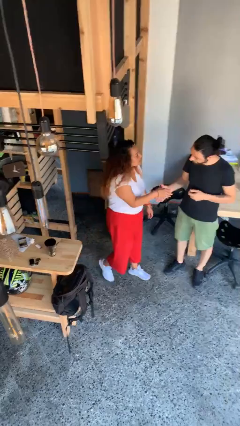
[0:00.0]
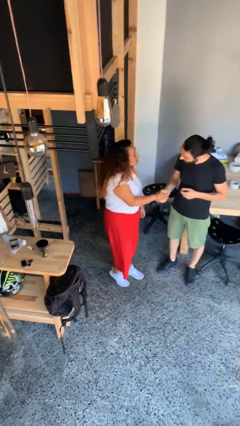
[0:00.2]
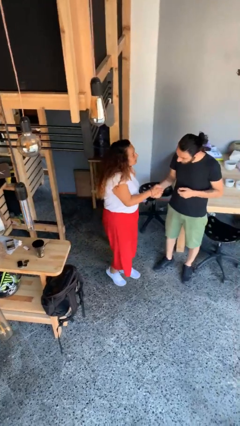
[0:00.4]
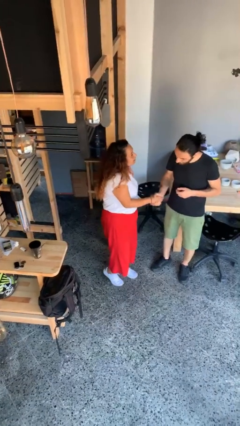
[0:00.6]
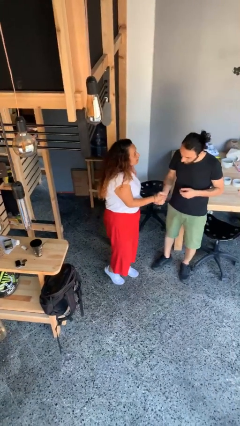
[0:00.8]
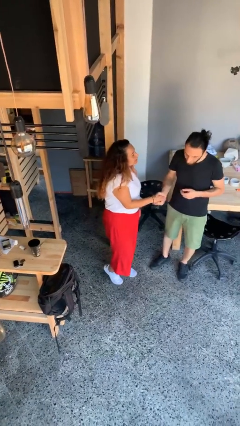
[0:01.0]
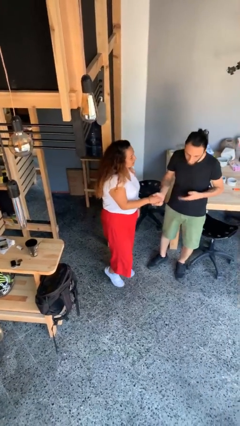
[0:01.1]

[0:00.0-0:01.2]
person shakes hand

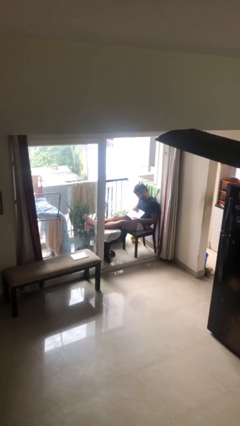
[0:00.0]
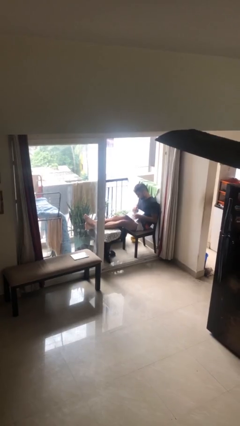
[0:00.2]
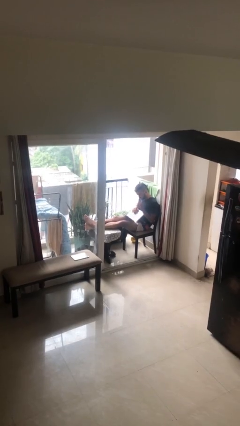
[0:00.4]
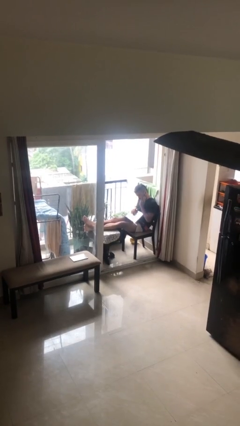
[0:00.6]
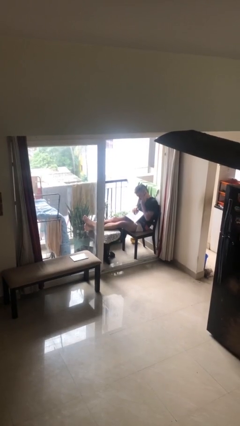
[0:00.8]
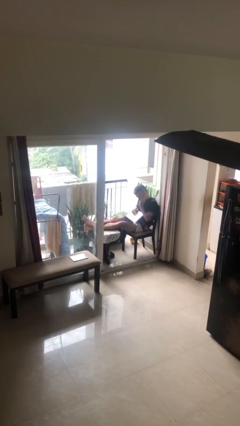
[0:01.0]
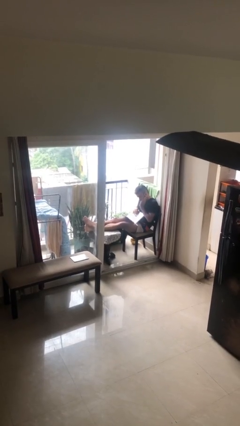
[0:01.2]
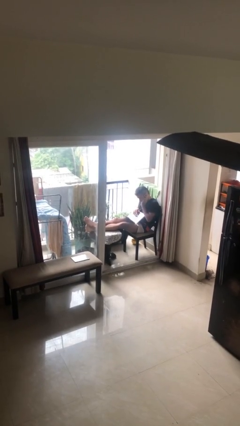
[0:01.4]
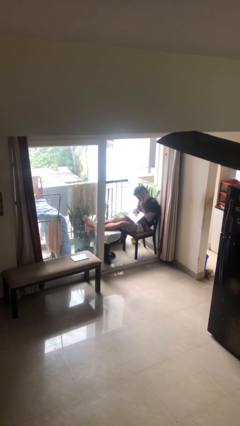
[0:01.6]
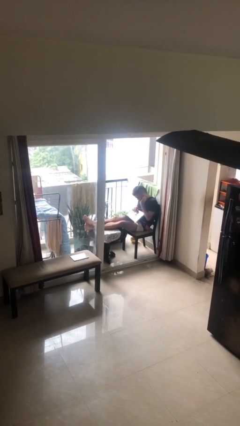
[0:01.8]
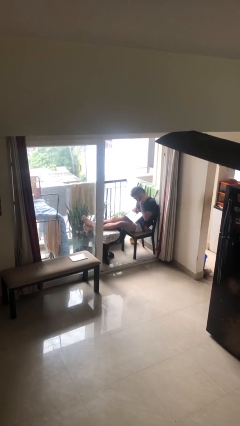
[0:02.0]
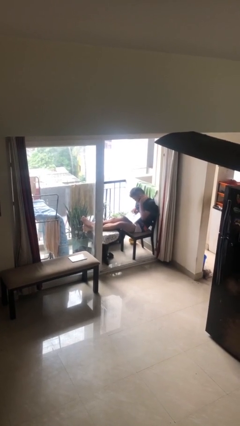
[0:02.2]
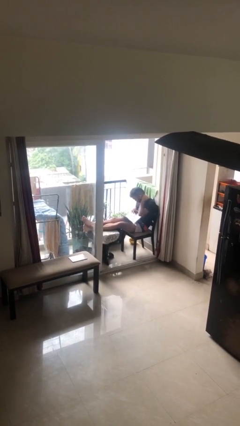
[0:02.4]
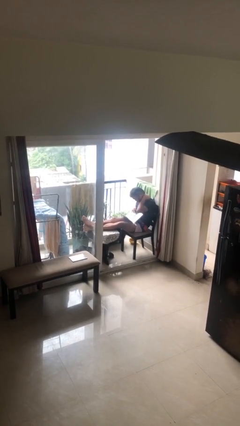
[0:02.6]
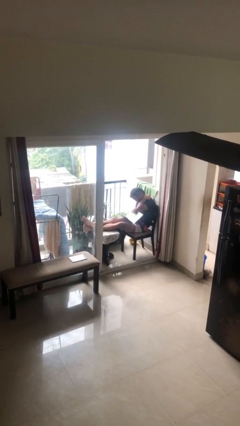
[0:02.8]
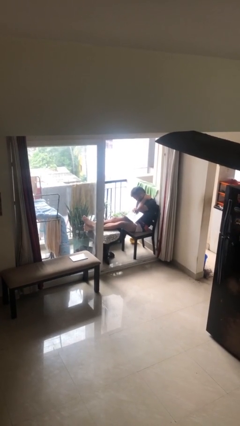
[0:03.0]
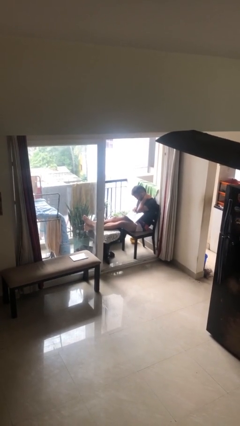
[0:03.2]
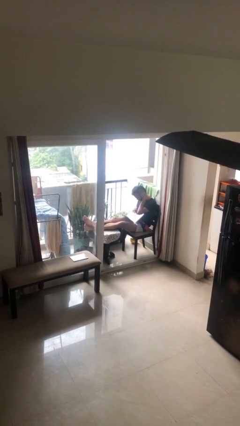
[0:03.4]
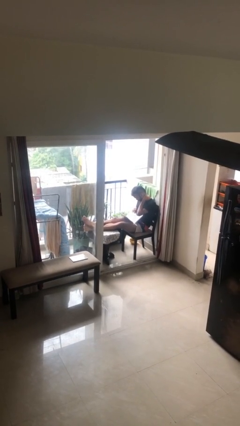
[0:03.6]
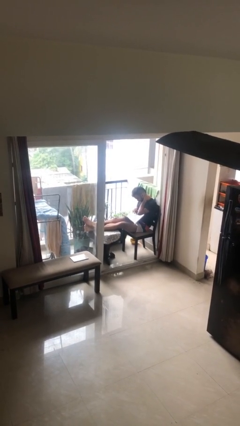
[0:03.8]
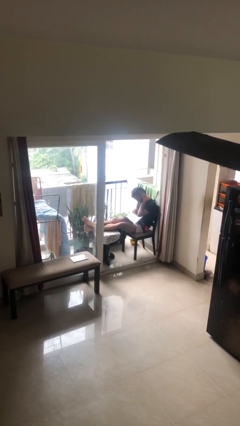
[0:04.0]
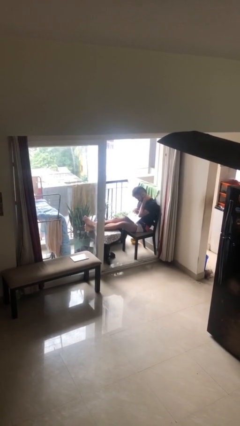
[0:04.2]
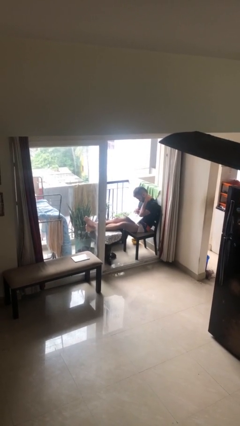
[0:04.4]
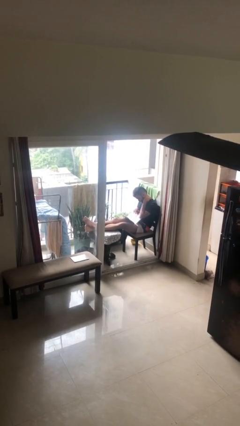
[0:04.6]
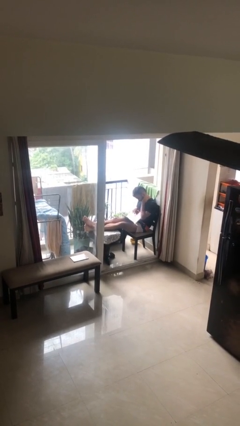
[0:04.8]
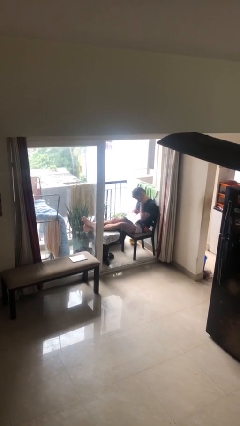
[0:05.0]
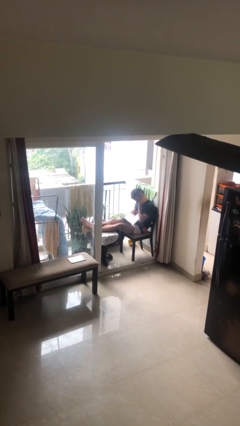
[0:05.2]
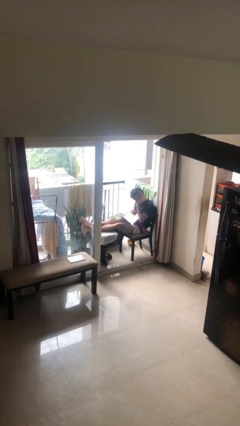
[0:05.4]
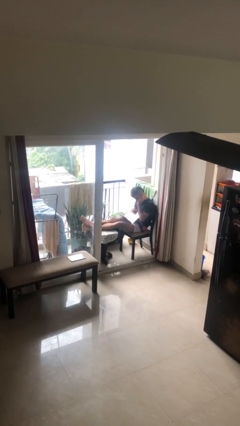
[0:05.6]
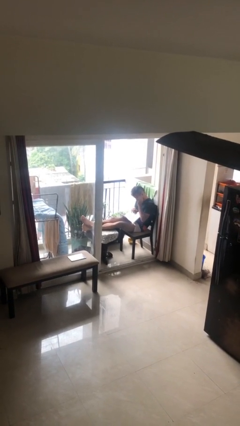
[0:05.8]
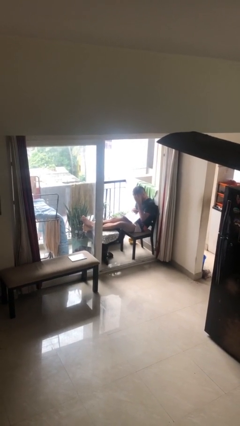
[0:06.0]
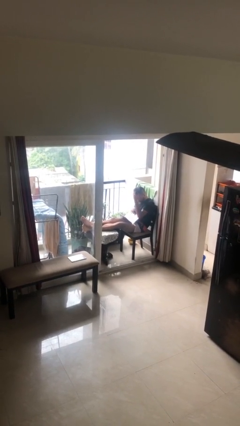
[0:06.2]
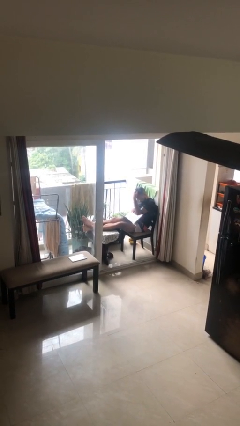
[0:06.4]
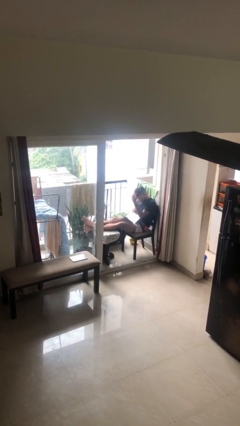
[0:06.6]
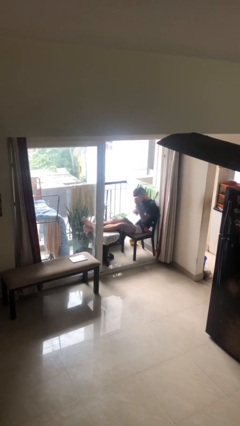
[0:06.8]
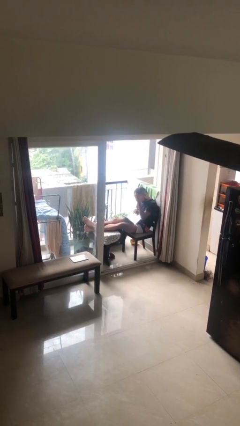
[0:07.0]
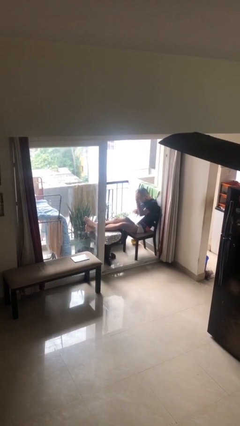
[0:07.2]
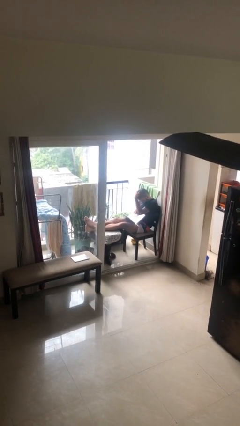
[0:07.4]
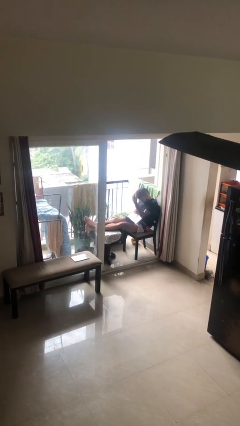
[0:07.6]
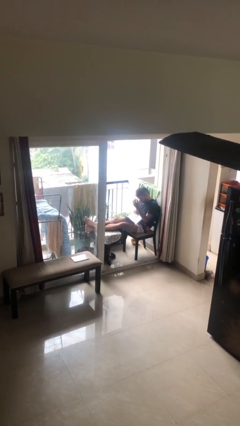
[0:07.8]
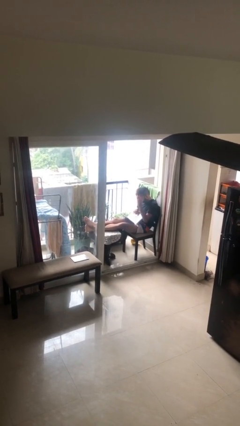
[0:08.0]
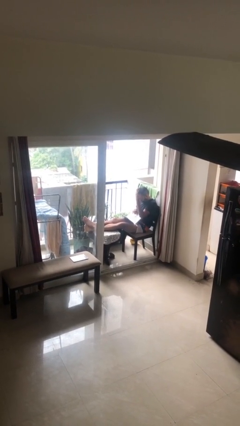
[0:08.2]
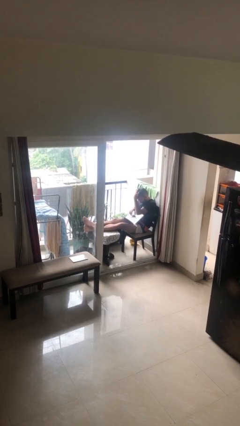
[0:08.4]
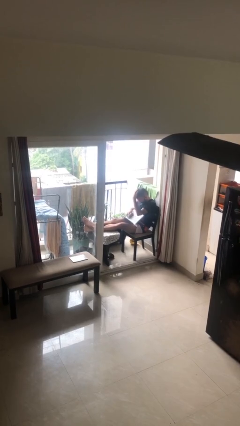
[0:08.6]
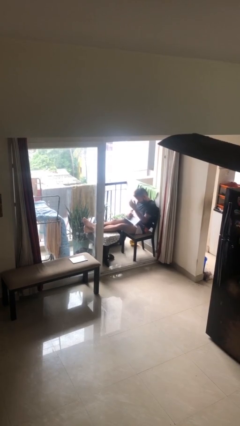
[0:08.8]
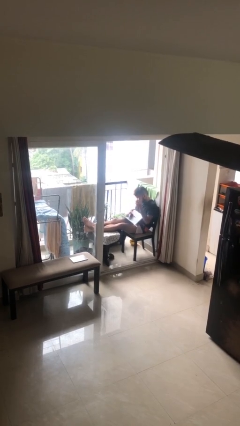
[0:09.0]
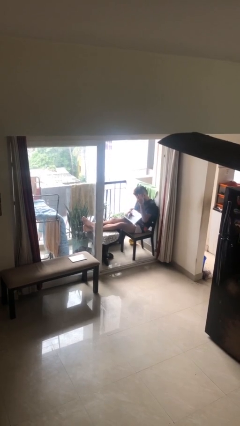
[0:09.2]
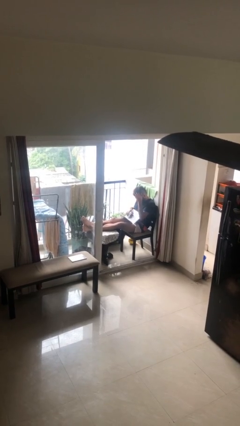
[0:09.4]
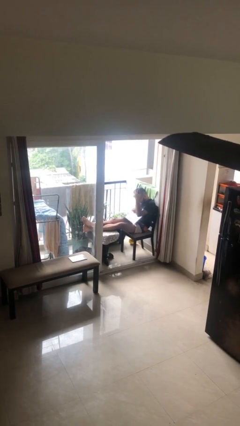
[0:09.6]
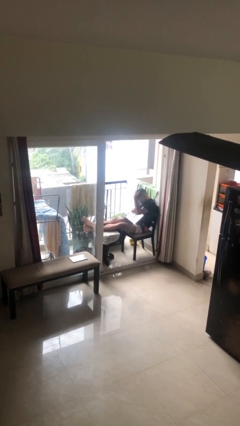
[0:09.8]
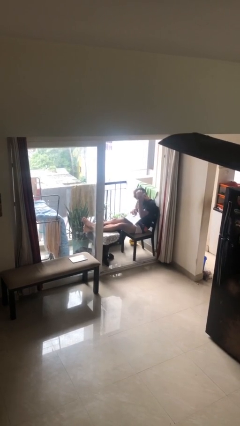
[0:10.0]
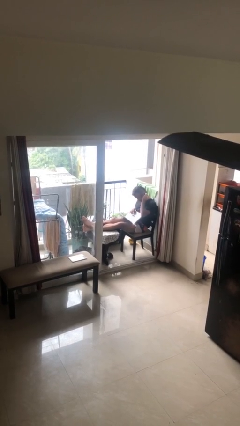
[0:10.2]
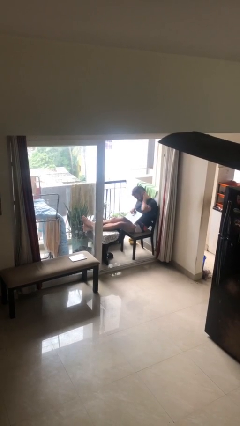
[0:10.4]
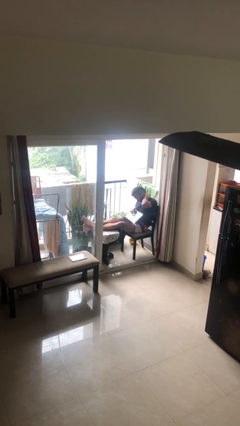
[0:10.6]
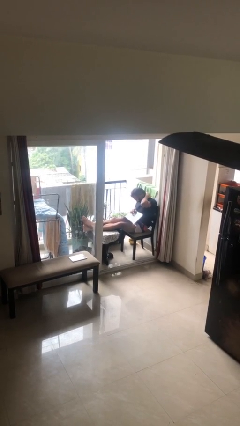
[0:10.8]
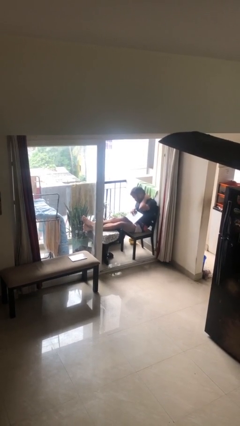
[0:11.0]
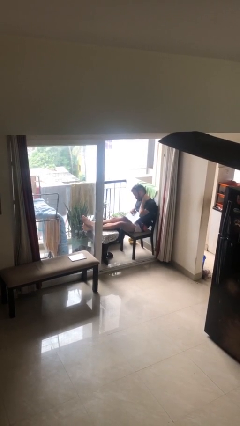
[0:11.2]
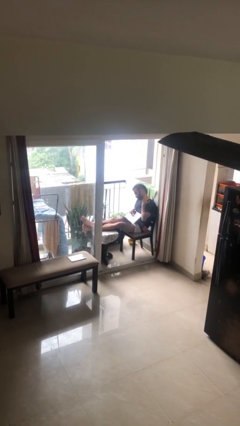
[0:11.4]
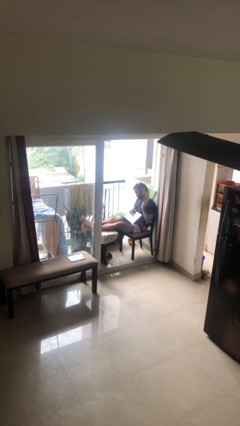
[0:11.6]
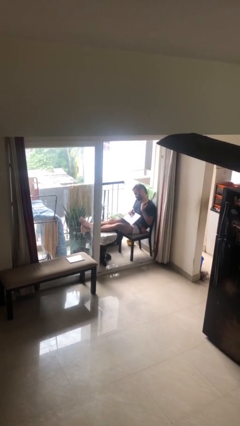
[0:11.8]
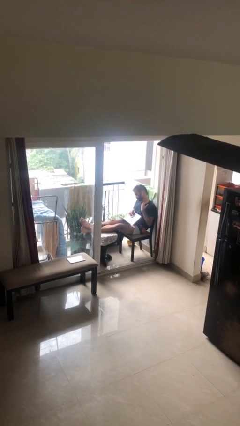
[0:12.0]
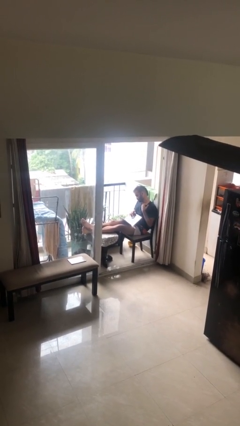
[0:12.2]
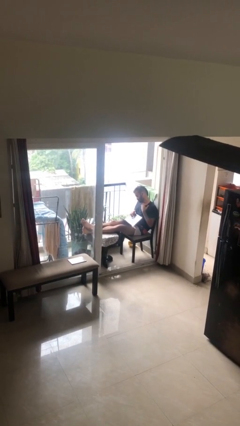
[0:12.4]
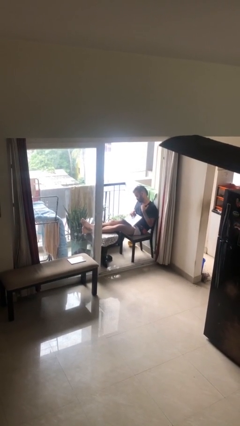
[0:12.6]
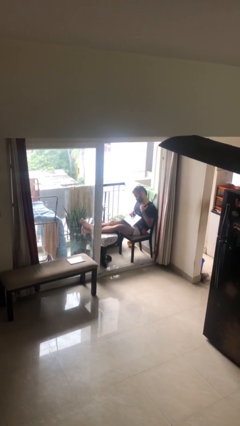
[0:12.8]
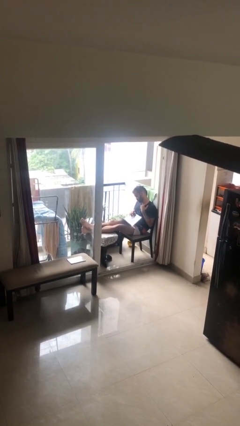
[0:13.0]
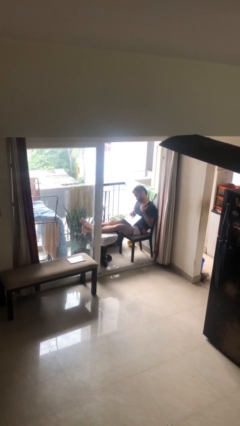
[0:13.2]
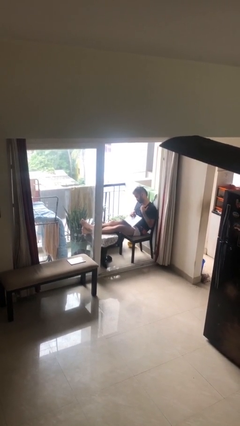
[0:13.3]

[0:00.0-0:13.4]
person interacts with laptop

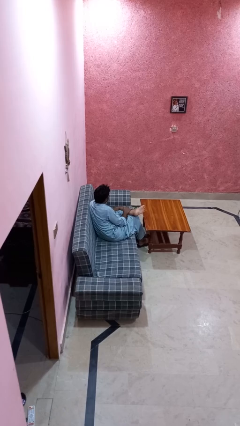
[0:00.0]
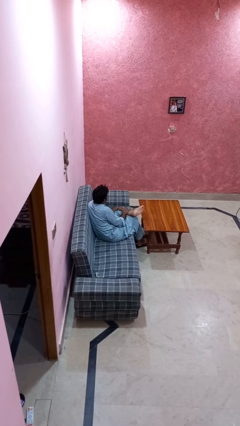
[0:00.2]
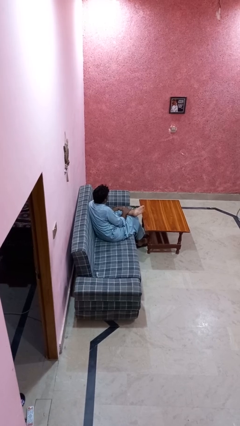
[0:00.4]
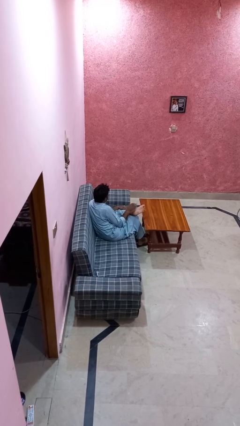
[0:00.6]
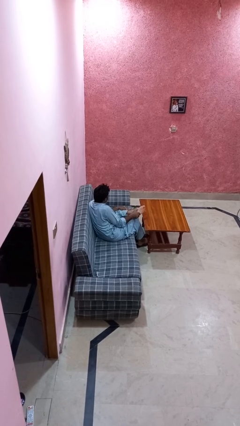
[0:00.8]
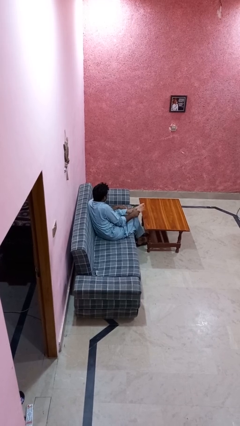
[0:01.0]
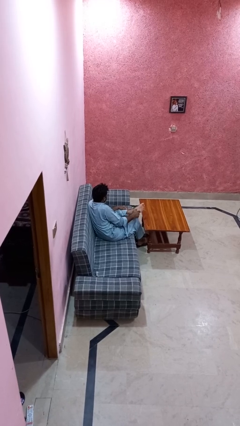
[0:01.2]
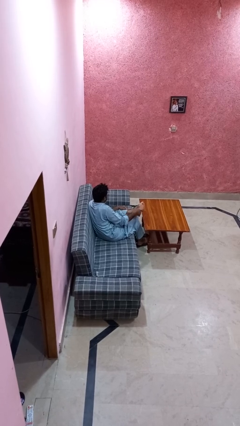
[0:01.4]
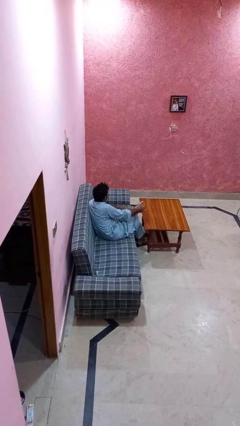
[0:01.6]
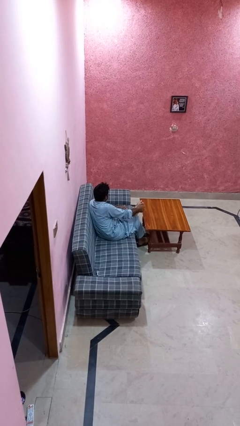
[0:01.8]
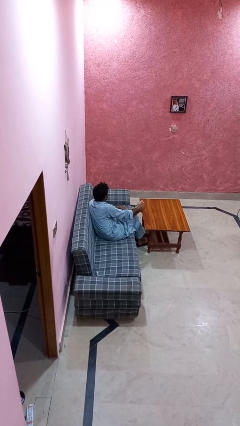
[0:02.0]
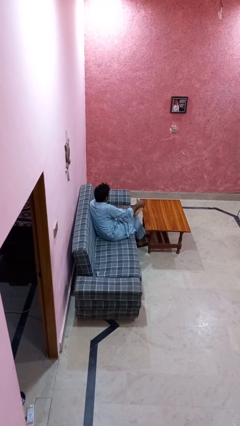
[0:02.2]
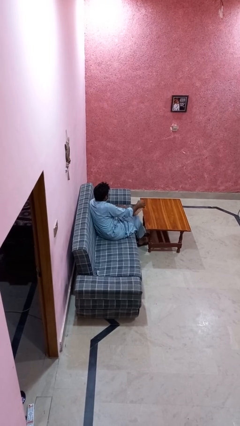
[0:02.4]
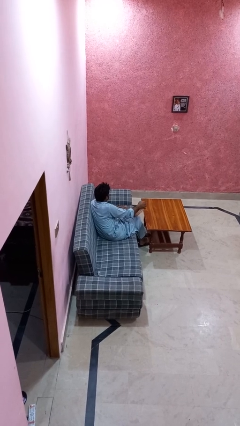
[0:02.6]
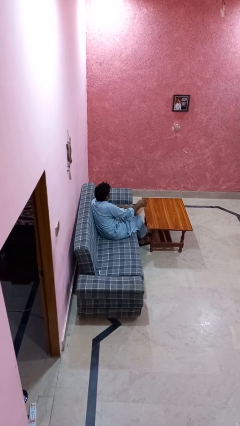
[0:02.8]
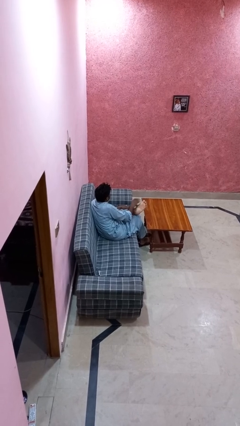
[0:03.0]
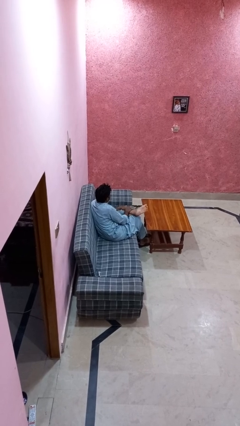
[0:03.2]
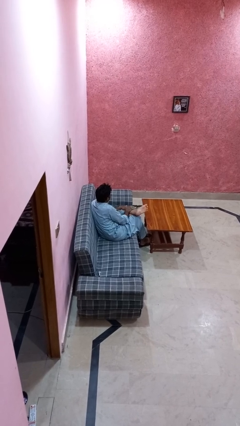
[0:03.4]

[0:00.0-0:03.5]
person rubs foot
